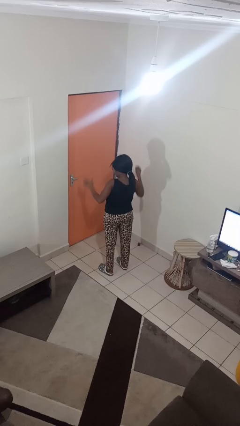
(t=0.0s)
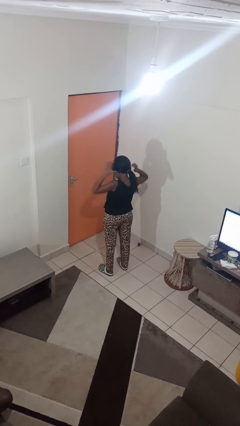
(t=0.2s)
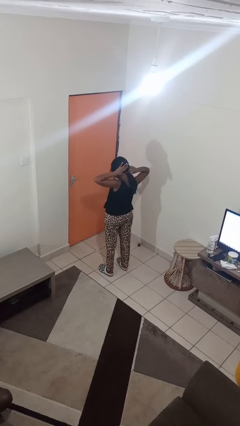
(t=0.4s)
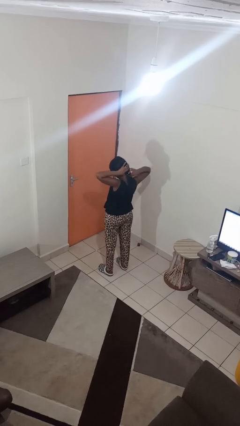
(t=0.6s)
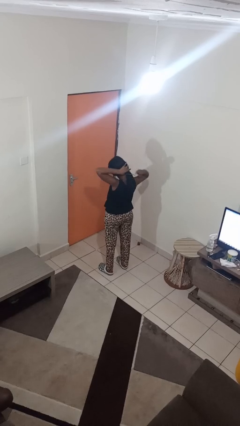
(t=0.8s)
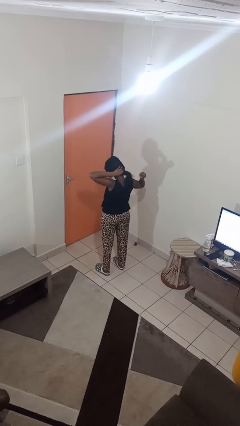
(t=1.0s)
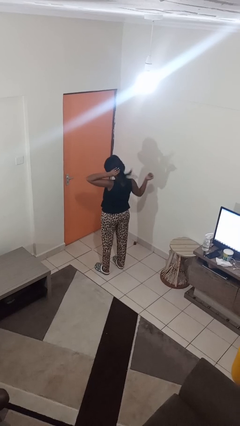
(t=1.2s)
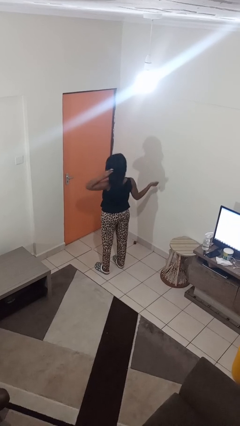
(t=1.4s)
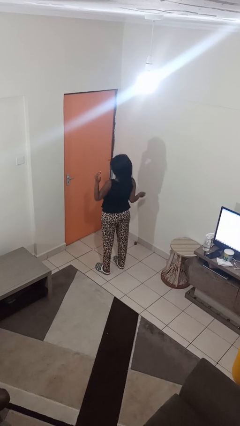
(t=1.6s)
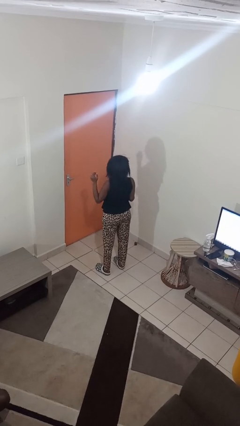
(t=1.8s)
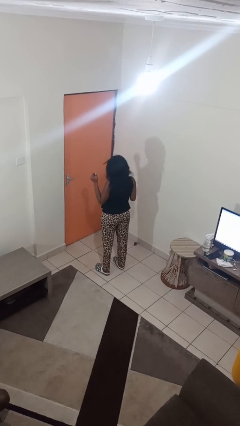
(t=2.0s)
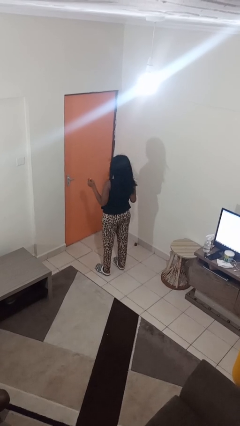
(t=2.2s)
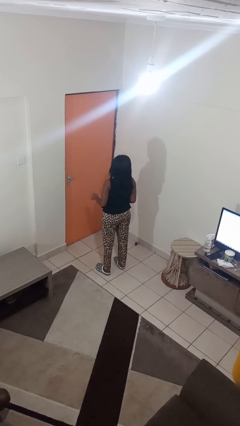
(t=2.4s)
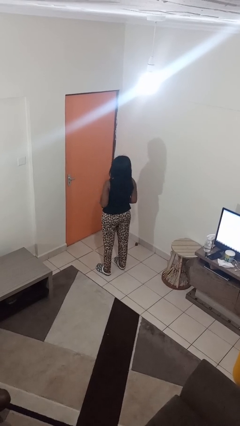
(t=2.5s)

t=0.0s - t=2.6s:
person takes off hairtie

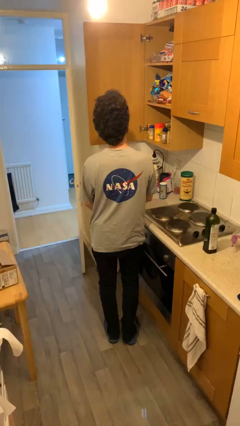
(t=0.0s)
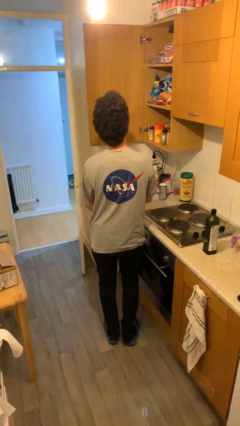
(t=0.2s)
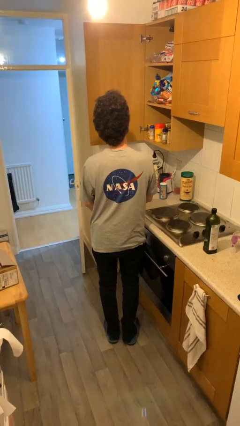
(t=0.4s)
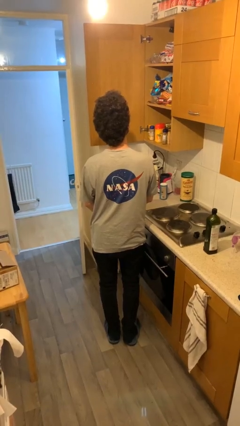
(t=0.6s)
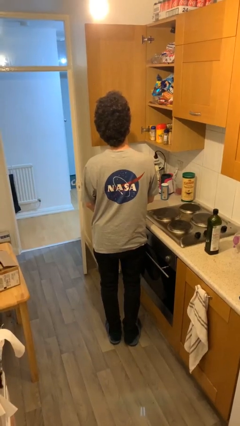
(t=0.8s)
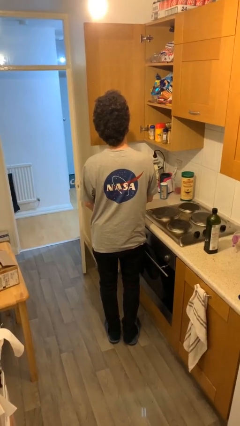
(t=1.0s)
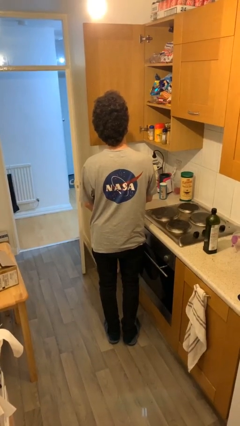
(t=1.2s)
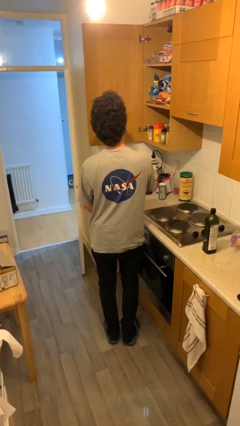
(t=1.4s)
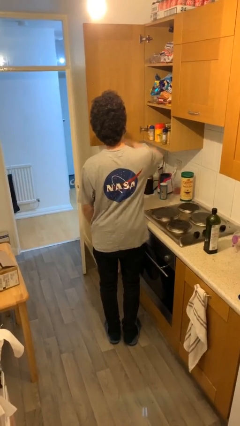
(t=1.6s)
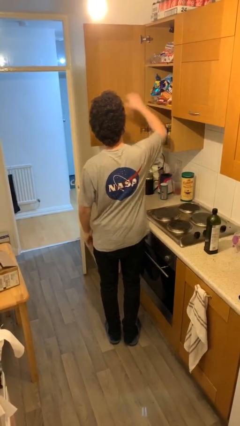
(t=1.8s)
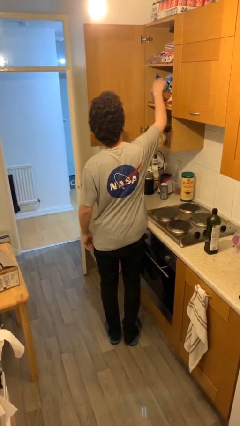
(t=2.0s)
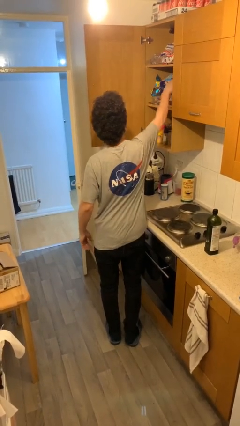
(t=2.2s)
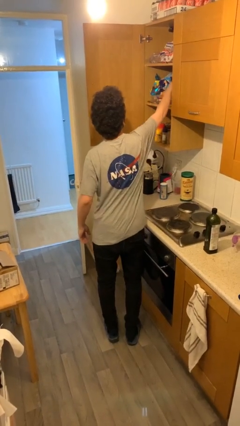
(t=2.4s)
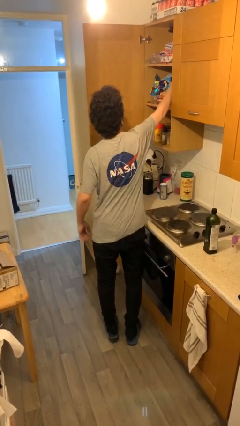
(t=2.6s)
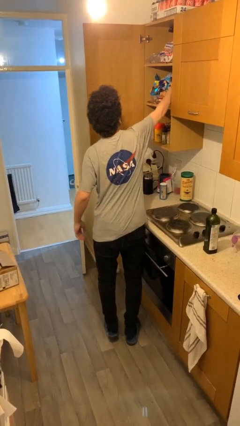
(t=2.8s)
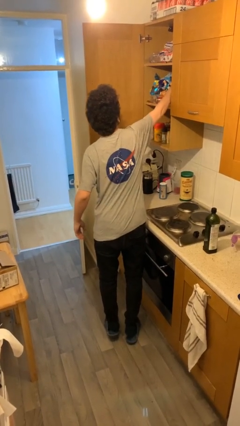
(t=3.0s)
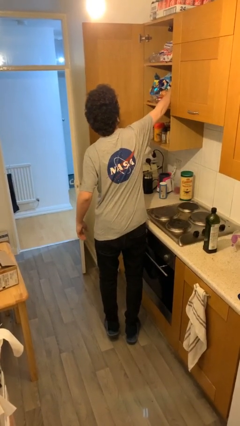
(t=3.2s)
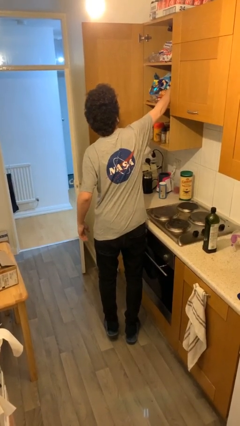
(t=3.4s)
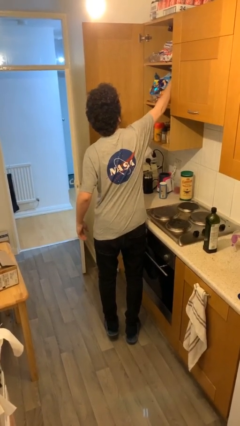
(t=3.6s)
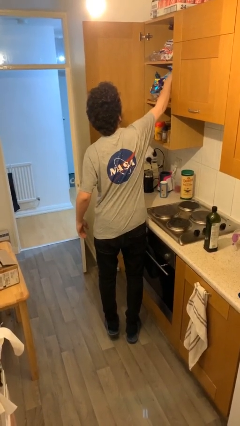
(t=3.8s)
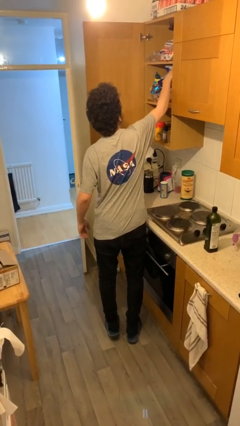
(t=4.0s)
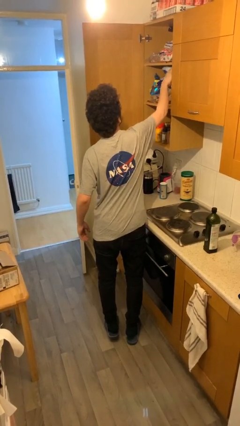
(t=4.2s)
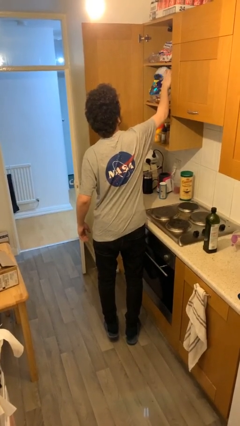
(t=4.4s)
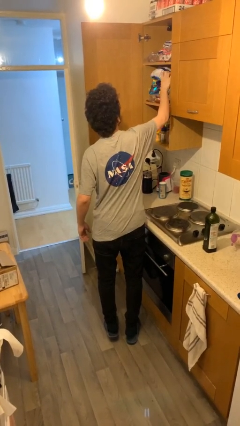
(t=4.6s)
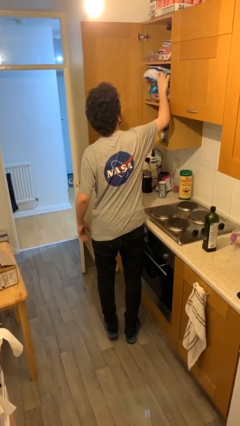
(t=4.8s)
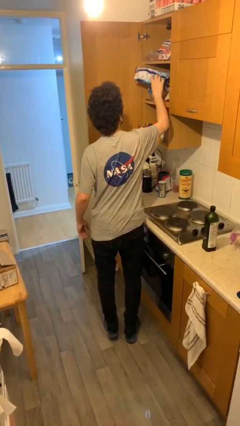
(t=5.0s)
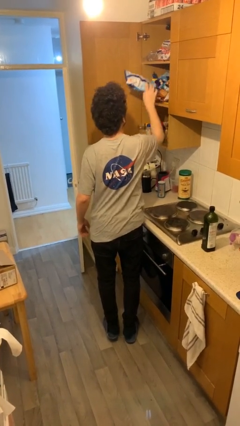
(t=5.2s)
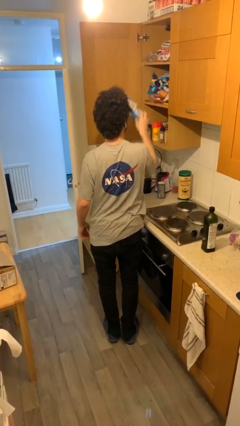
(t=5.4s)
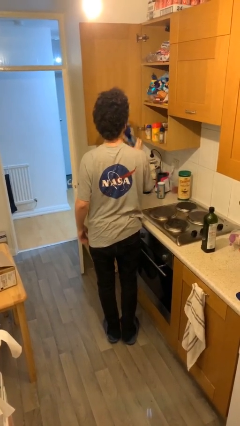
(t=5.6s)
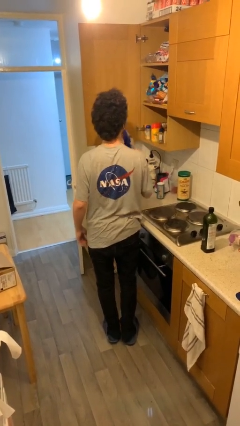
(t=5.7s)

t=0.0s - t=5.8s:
person picks up object from shelf

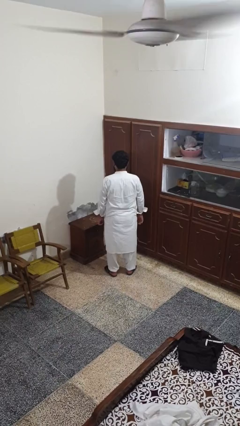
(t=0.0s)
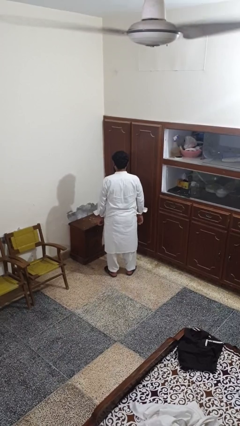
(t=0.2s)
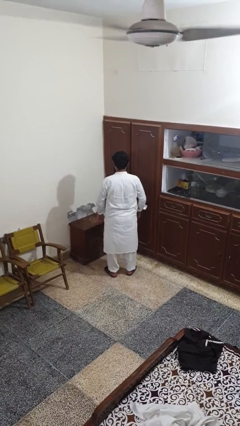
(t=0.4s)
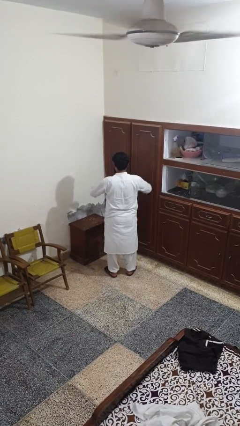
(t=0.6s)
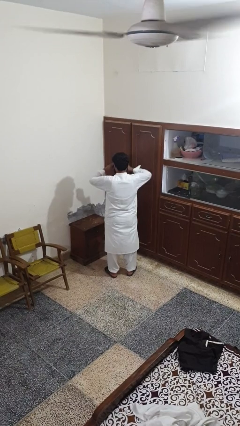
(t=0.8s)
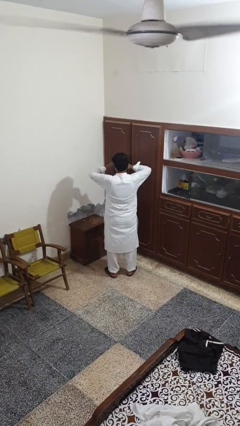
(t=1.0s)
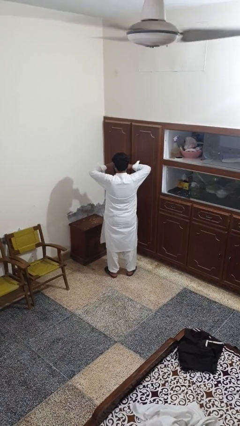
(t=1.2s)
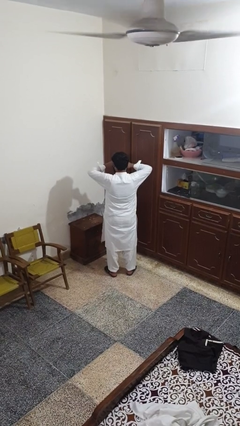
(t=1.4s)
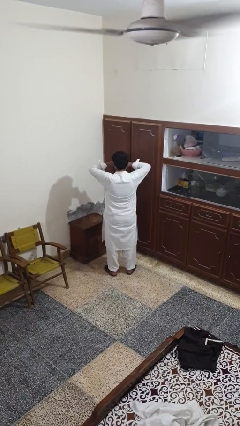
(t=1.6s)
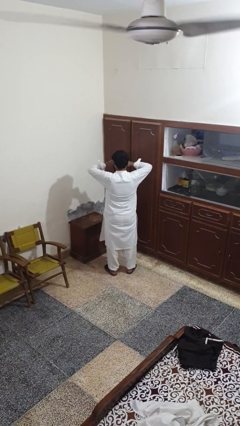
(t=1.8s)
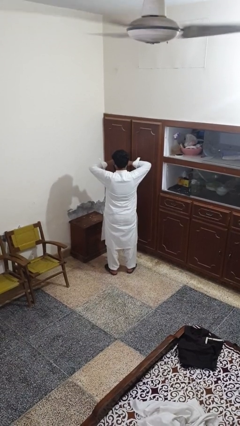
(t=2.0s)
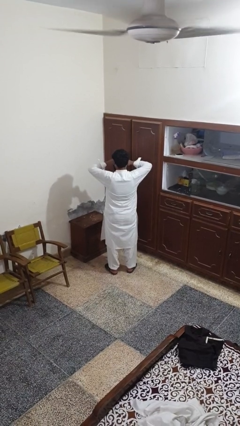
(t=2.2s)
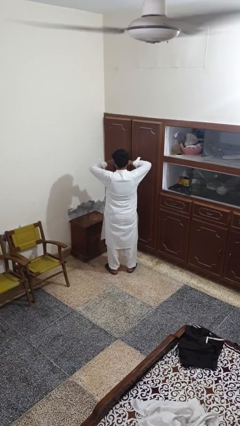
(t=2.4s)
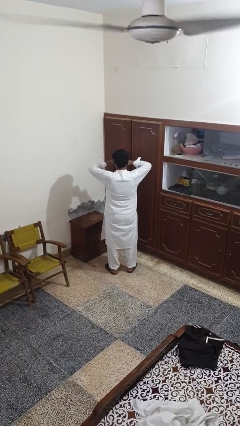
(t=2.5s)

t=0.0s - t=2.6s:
person rubs eyes

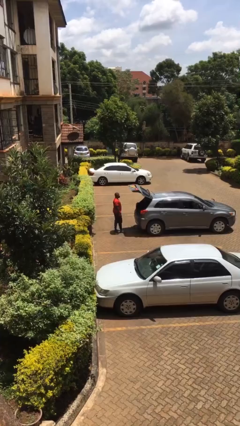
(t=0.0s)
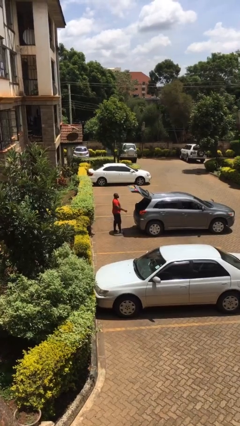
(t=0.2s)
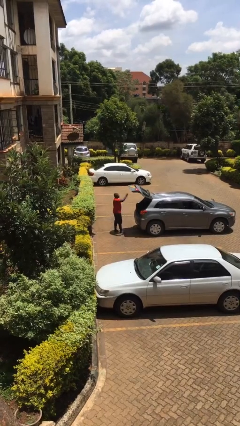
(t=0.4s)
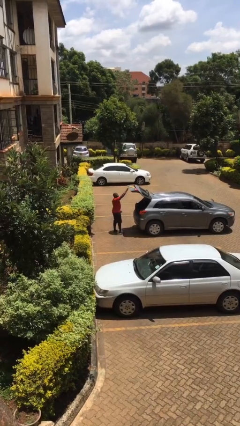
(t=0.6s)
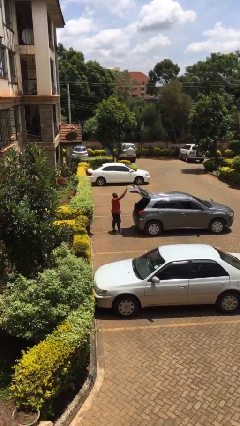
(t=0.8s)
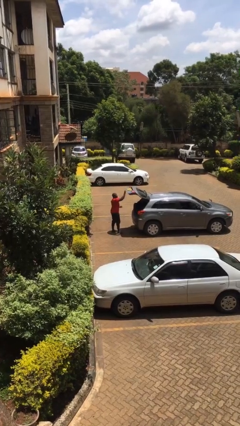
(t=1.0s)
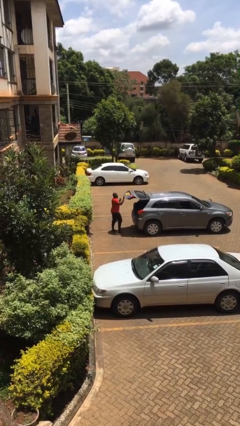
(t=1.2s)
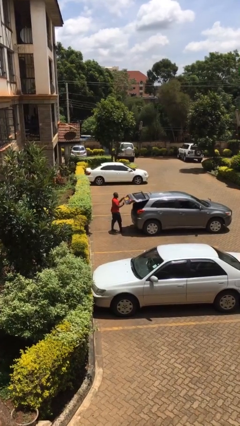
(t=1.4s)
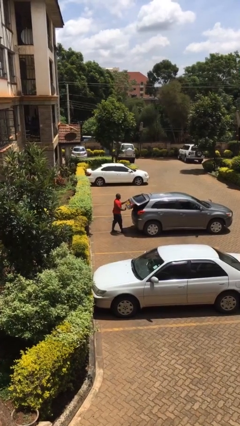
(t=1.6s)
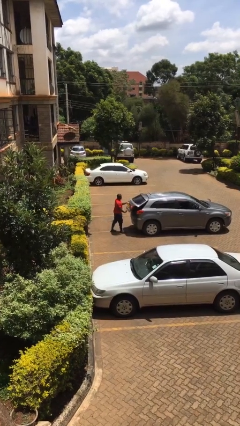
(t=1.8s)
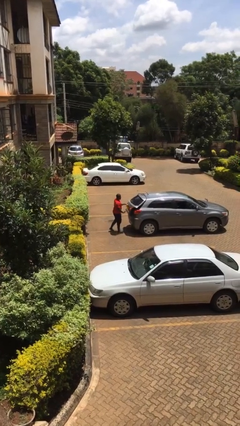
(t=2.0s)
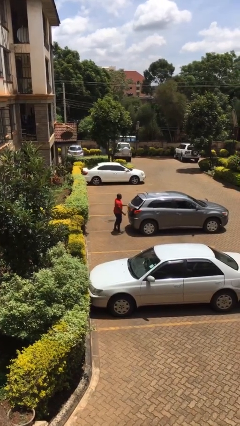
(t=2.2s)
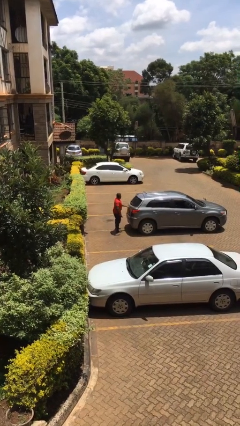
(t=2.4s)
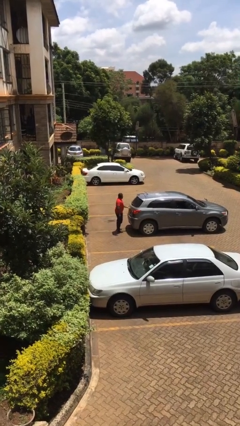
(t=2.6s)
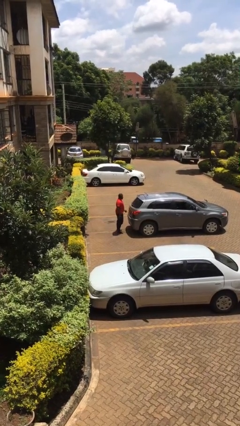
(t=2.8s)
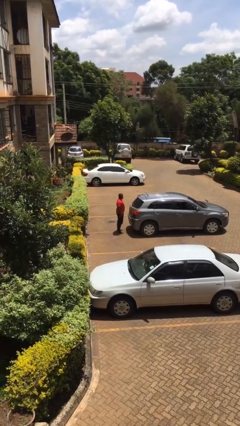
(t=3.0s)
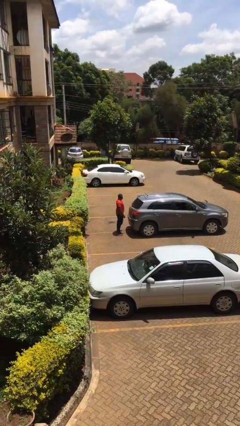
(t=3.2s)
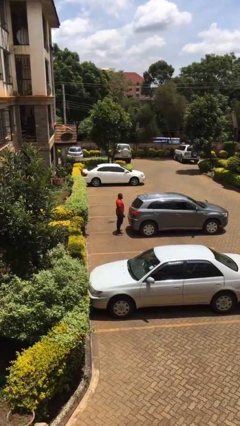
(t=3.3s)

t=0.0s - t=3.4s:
person closes car trunk

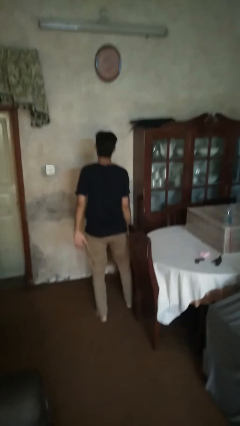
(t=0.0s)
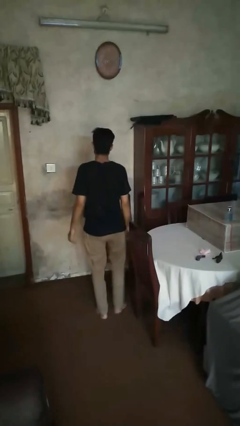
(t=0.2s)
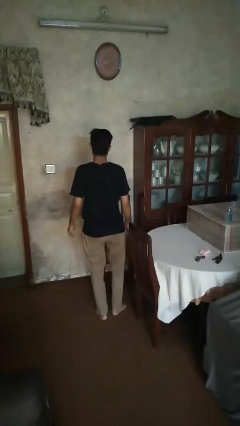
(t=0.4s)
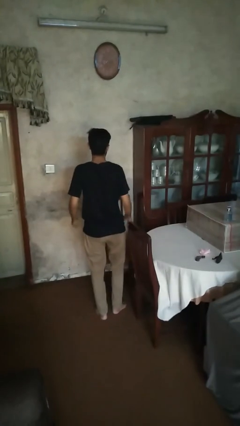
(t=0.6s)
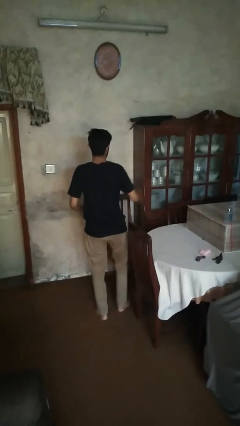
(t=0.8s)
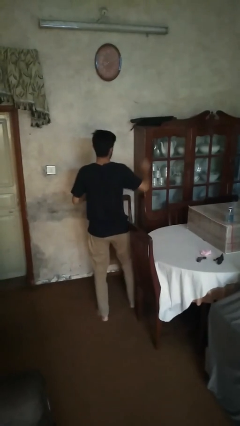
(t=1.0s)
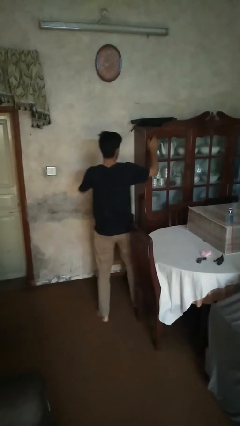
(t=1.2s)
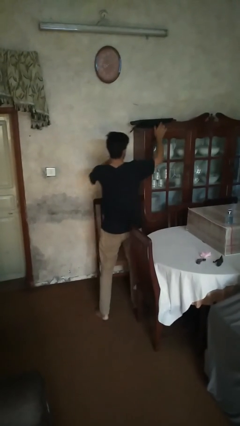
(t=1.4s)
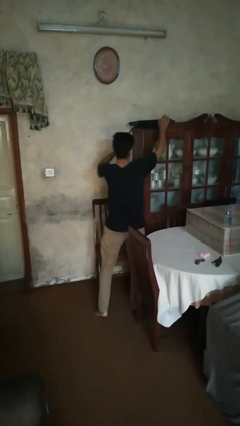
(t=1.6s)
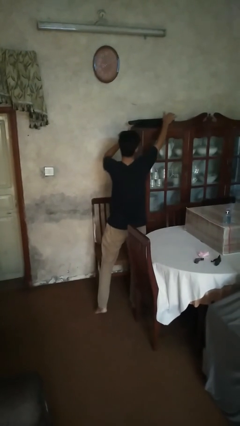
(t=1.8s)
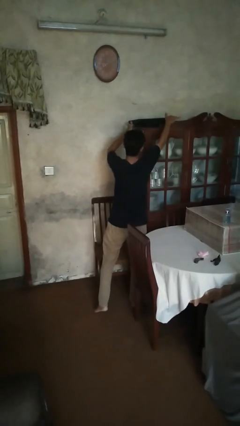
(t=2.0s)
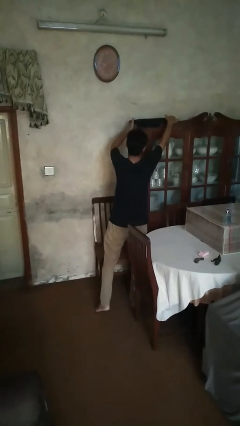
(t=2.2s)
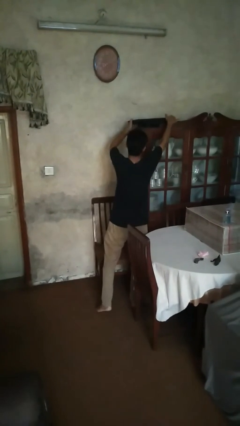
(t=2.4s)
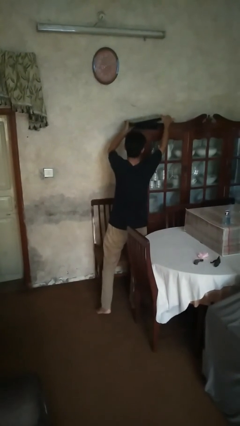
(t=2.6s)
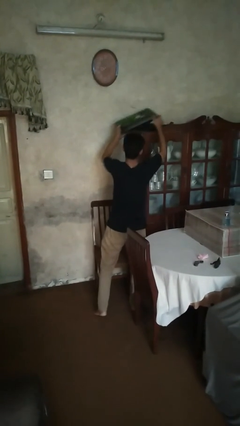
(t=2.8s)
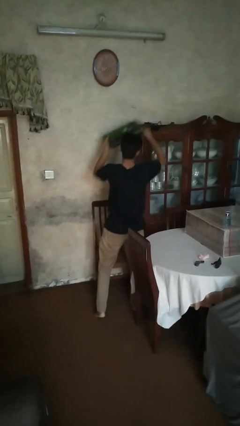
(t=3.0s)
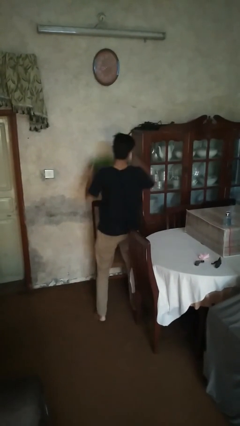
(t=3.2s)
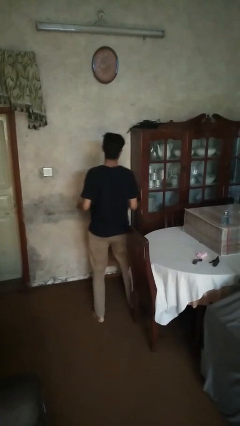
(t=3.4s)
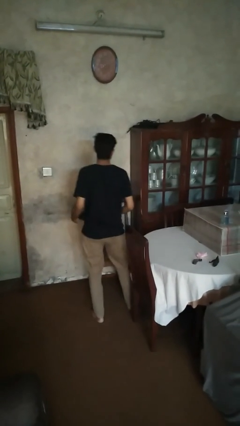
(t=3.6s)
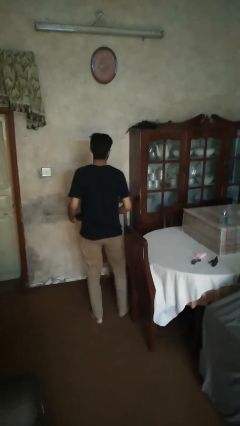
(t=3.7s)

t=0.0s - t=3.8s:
person picks up object from cabinet
